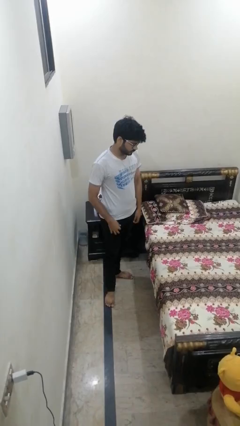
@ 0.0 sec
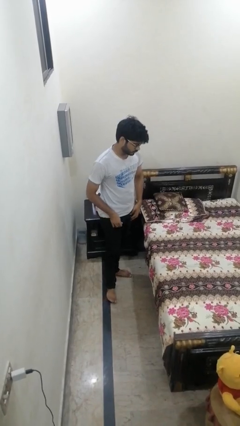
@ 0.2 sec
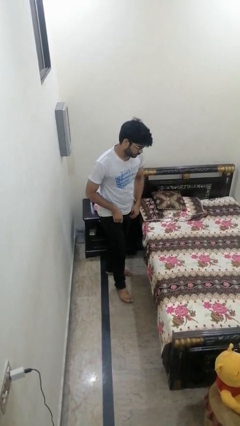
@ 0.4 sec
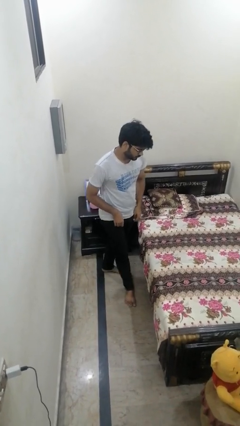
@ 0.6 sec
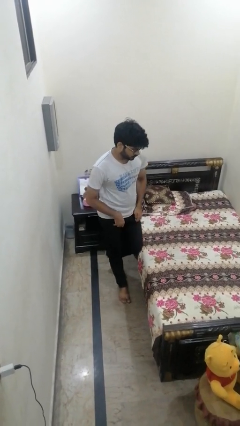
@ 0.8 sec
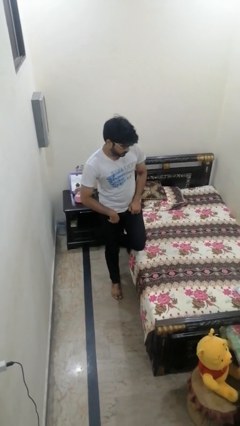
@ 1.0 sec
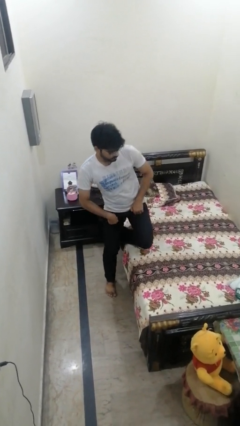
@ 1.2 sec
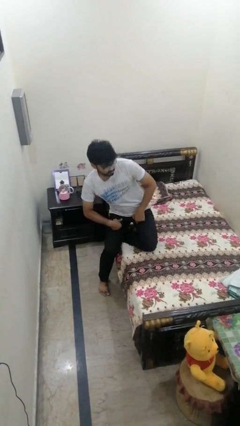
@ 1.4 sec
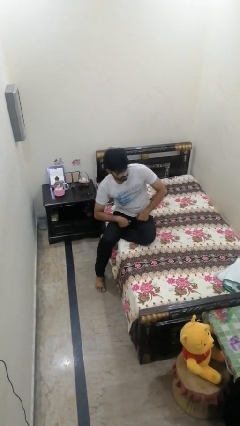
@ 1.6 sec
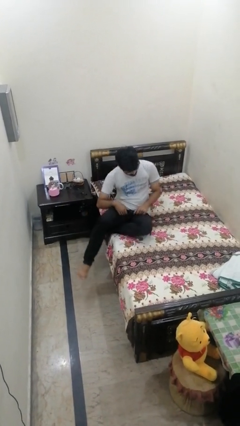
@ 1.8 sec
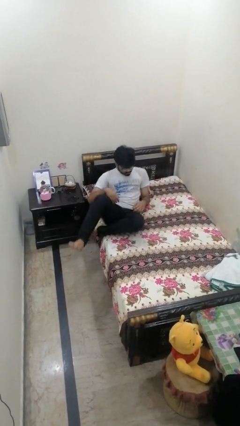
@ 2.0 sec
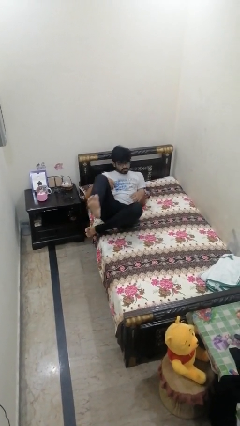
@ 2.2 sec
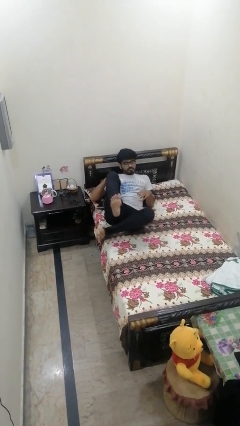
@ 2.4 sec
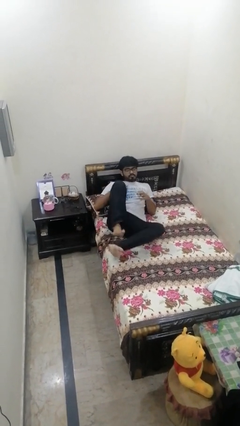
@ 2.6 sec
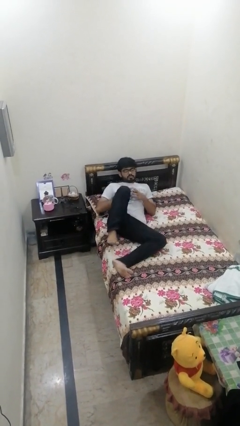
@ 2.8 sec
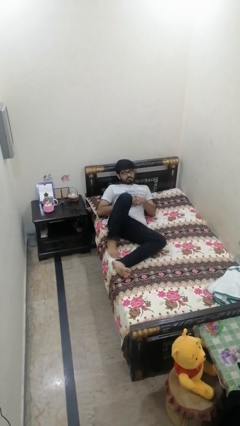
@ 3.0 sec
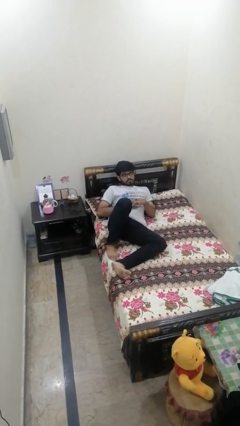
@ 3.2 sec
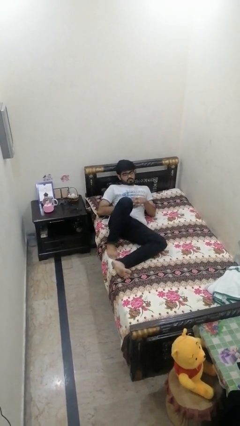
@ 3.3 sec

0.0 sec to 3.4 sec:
person lies down on bed

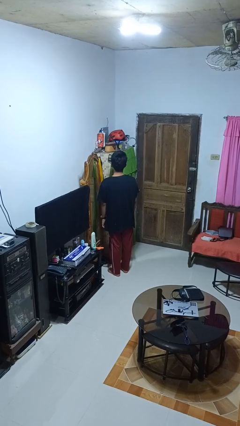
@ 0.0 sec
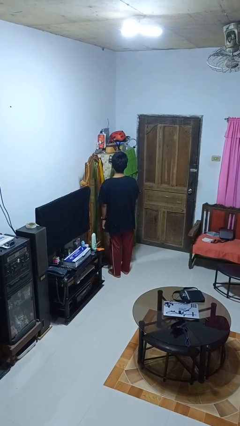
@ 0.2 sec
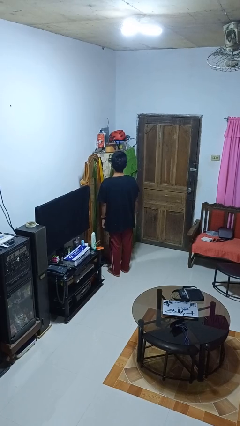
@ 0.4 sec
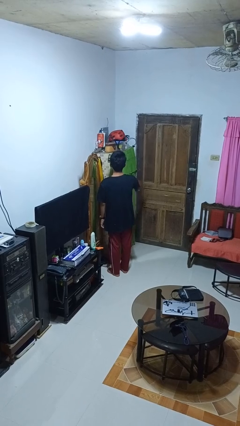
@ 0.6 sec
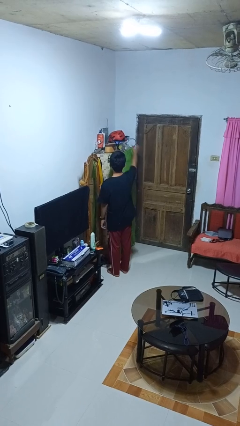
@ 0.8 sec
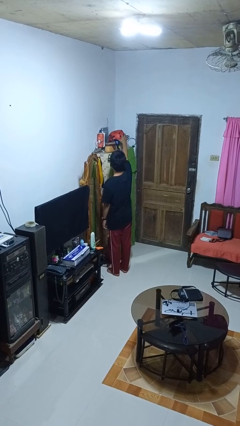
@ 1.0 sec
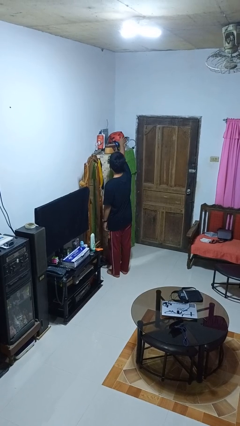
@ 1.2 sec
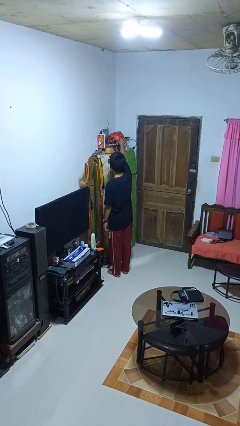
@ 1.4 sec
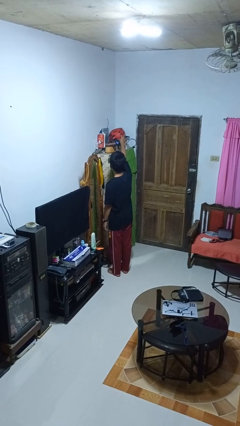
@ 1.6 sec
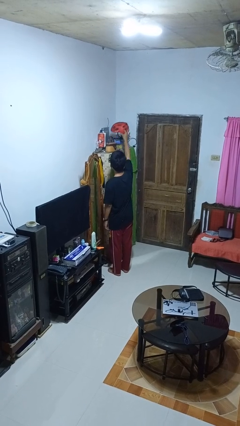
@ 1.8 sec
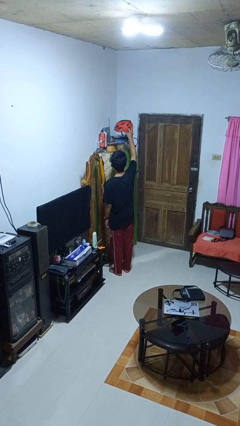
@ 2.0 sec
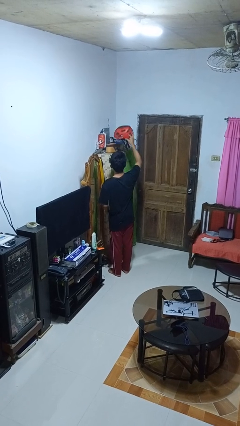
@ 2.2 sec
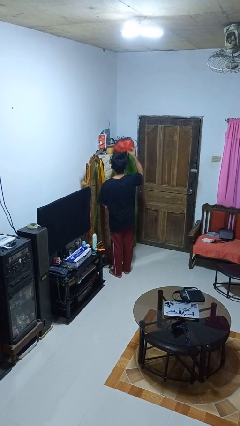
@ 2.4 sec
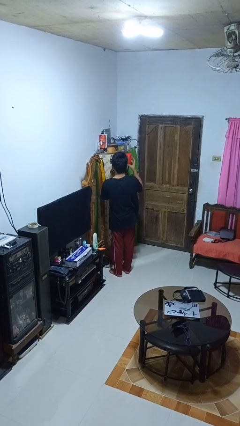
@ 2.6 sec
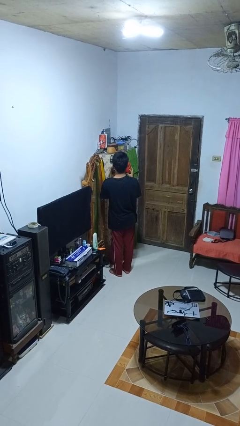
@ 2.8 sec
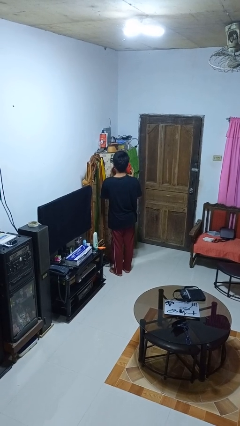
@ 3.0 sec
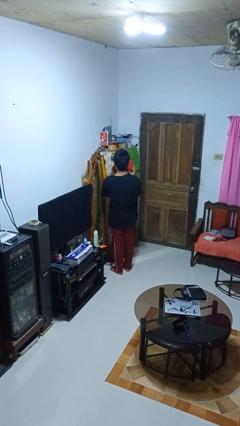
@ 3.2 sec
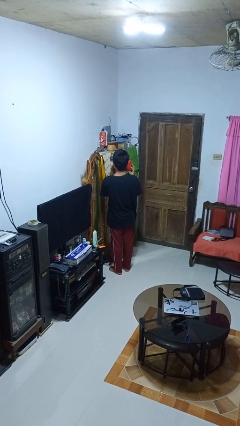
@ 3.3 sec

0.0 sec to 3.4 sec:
person picks up object from shelf

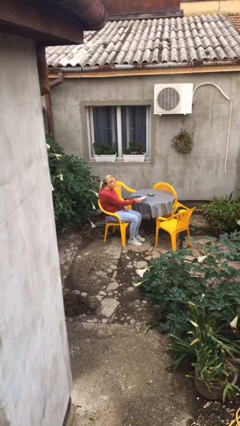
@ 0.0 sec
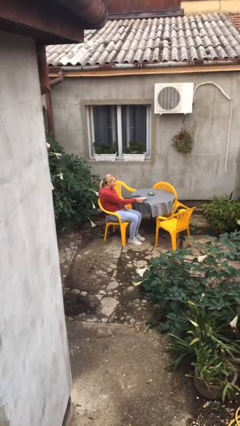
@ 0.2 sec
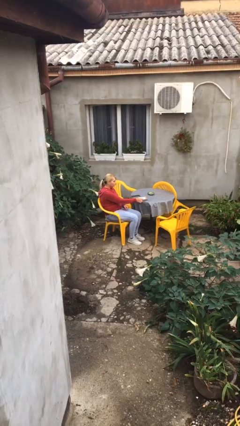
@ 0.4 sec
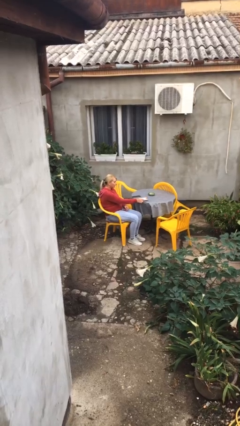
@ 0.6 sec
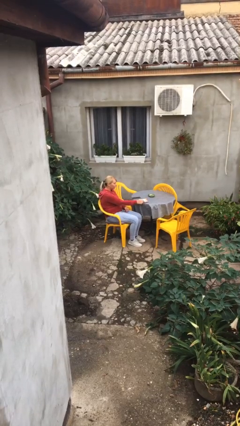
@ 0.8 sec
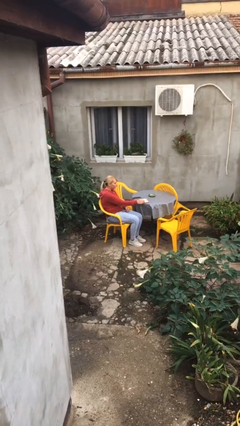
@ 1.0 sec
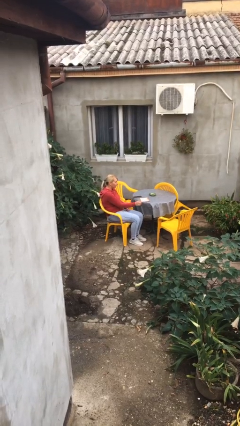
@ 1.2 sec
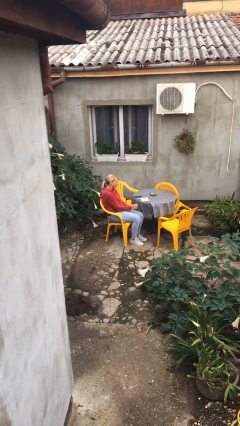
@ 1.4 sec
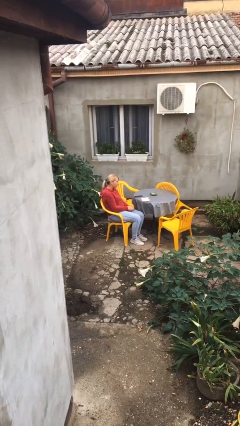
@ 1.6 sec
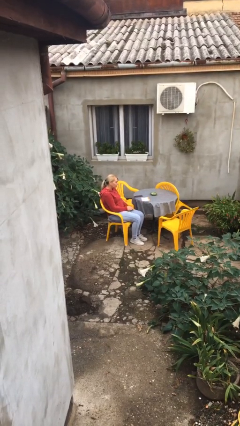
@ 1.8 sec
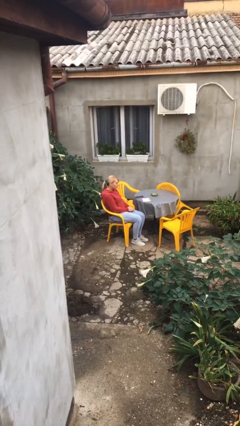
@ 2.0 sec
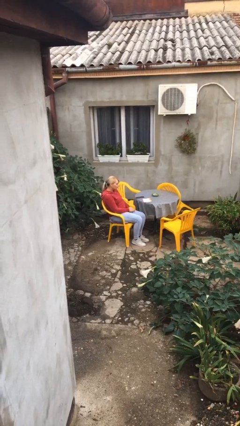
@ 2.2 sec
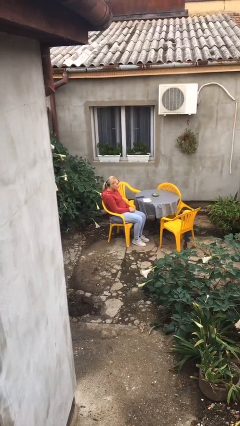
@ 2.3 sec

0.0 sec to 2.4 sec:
person puts down object on table

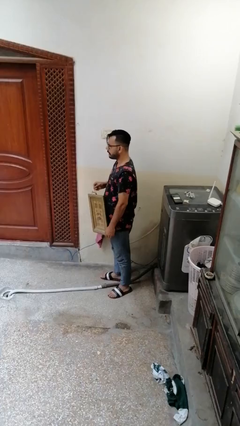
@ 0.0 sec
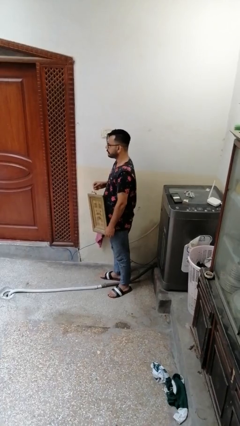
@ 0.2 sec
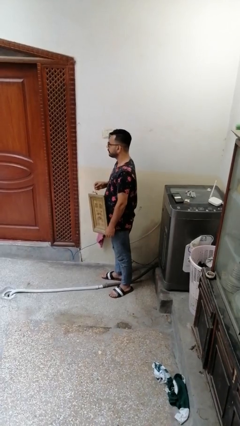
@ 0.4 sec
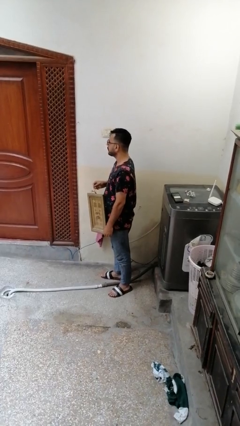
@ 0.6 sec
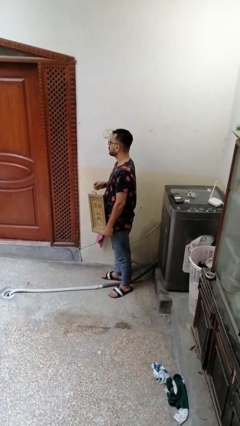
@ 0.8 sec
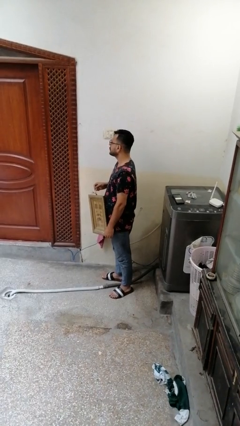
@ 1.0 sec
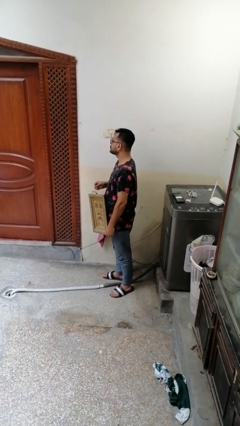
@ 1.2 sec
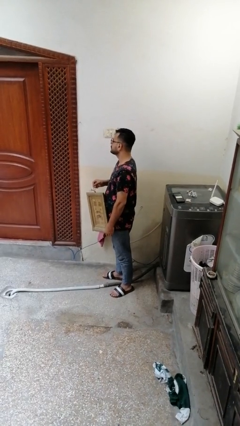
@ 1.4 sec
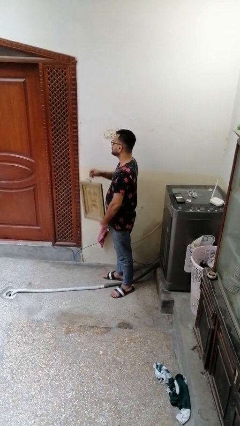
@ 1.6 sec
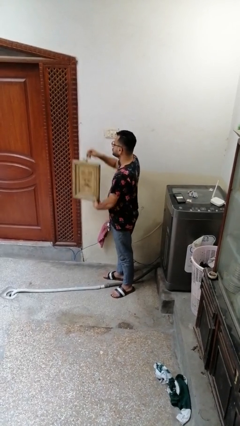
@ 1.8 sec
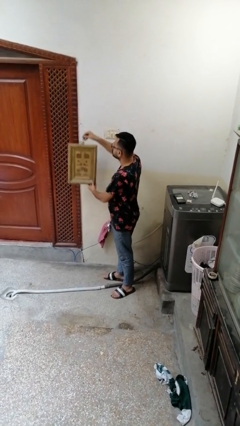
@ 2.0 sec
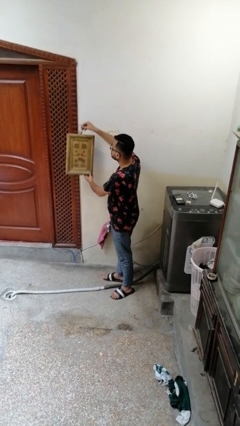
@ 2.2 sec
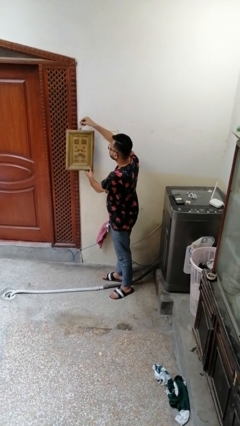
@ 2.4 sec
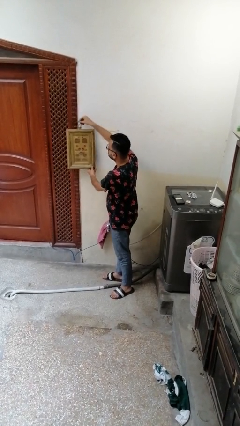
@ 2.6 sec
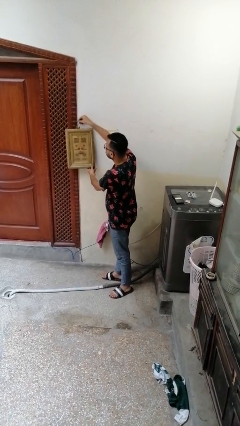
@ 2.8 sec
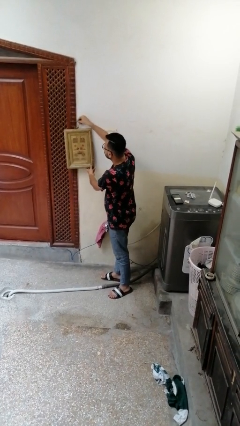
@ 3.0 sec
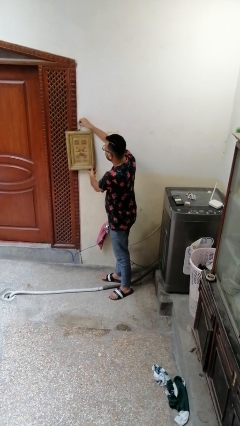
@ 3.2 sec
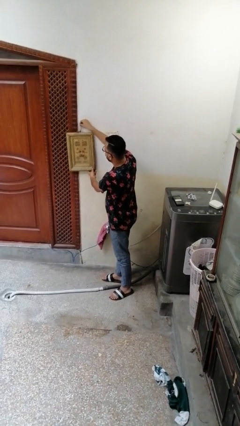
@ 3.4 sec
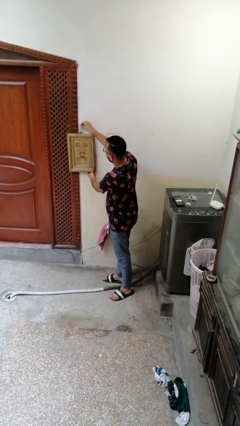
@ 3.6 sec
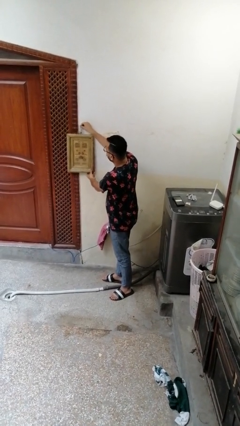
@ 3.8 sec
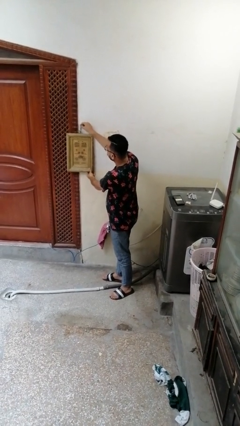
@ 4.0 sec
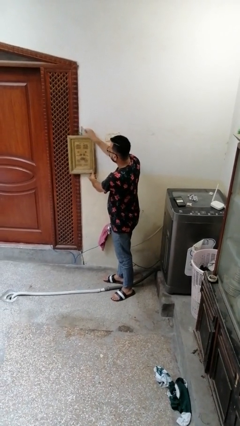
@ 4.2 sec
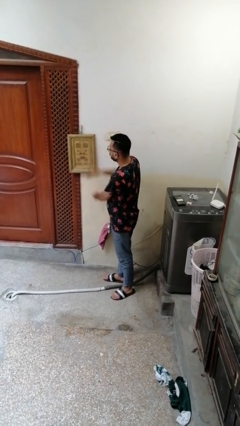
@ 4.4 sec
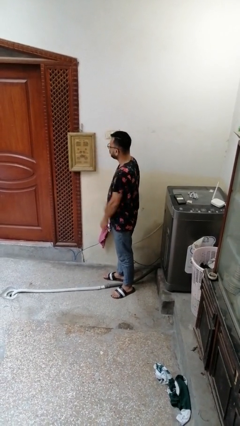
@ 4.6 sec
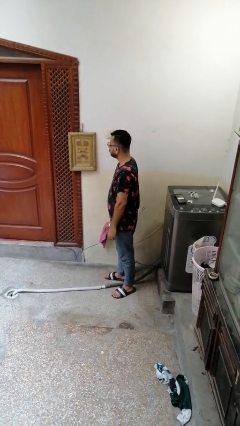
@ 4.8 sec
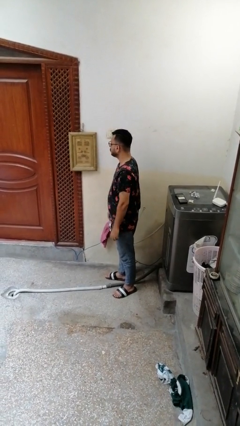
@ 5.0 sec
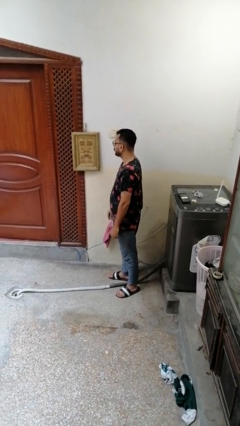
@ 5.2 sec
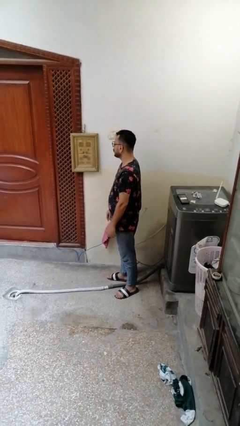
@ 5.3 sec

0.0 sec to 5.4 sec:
person puts up picture frame

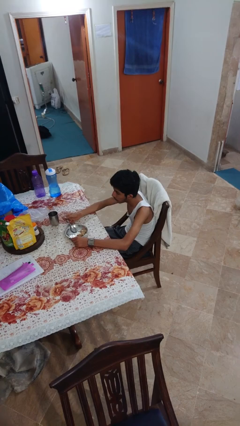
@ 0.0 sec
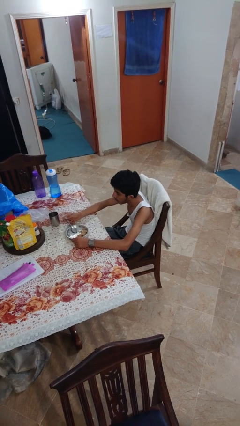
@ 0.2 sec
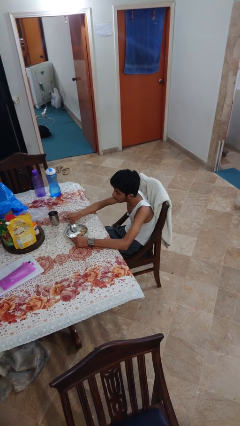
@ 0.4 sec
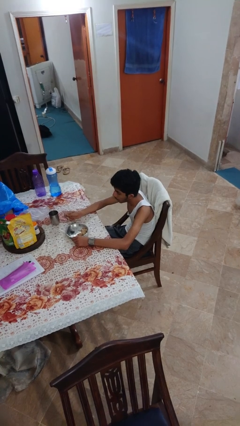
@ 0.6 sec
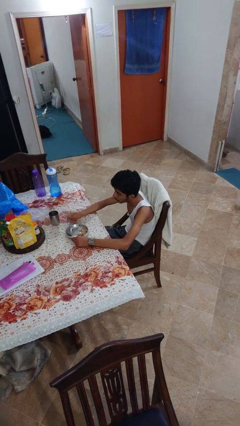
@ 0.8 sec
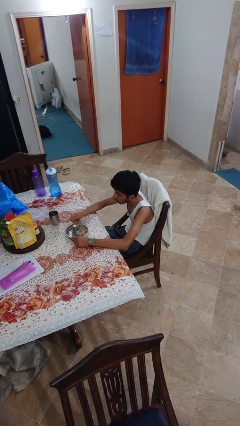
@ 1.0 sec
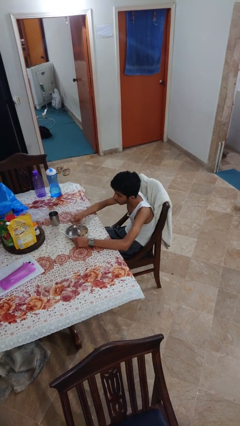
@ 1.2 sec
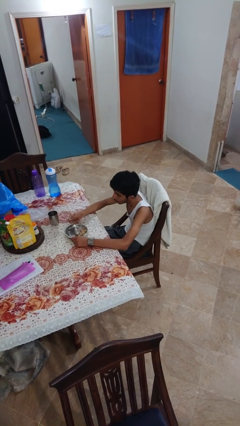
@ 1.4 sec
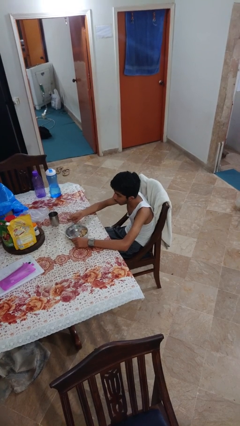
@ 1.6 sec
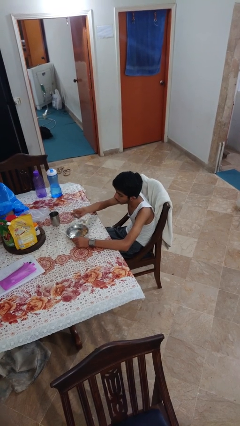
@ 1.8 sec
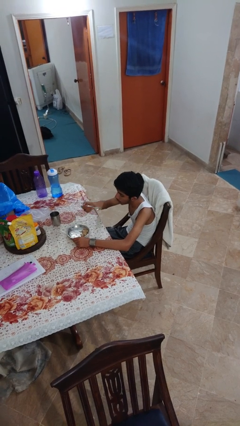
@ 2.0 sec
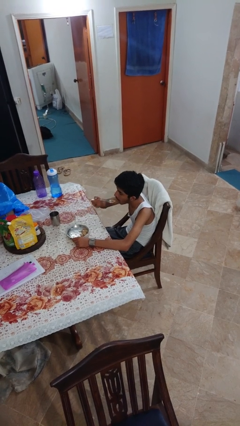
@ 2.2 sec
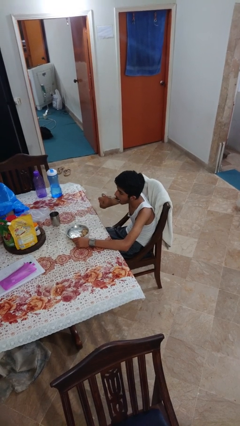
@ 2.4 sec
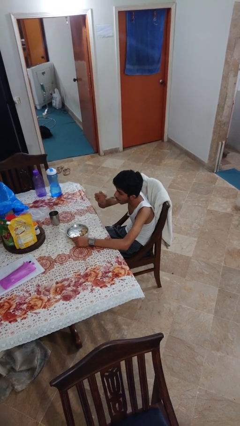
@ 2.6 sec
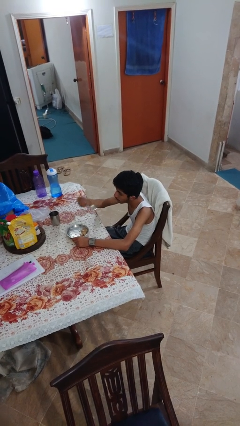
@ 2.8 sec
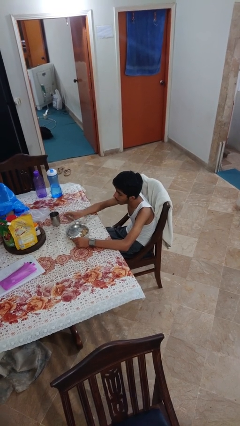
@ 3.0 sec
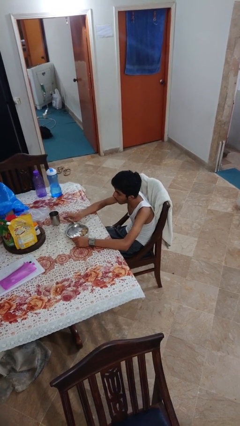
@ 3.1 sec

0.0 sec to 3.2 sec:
person eats with utensil
